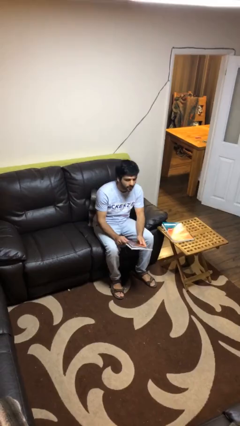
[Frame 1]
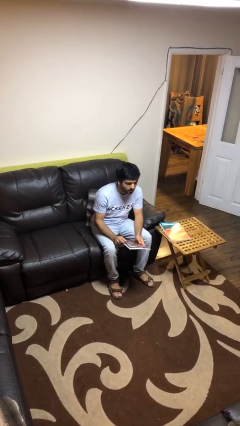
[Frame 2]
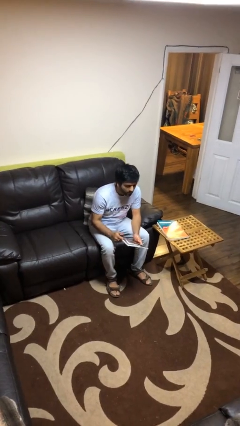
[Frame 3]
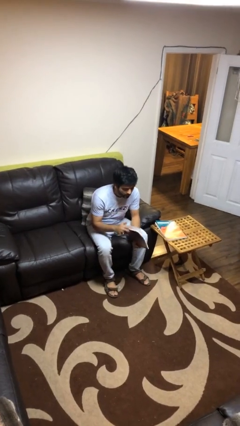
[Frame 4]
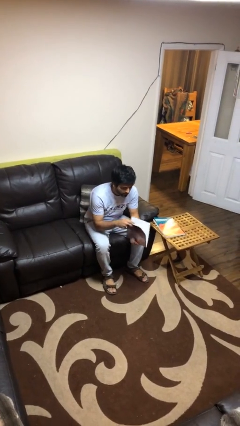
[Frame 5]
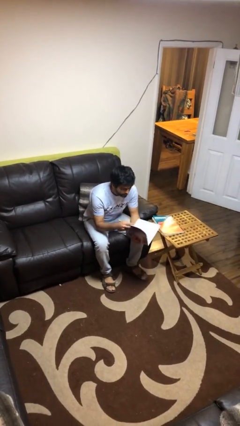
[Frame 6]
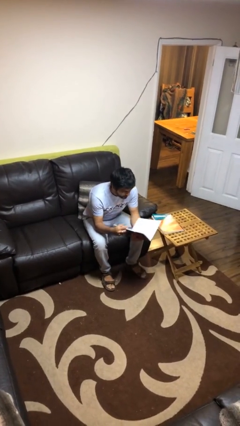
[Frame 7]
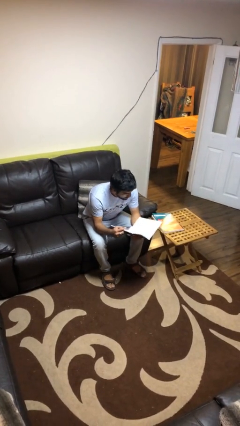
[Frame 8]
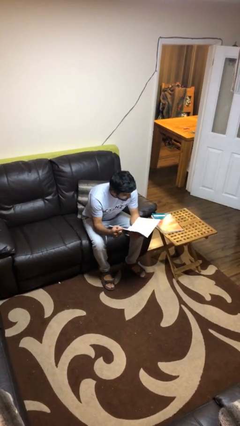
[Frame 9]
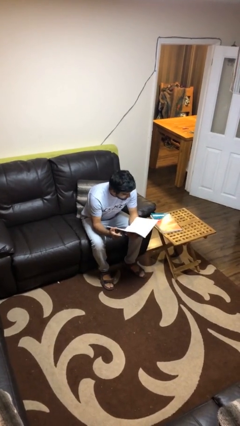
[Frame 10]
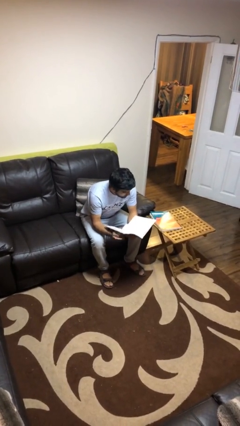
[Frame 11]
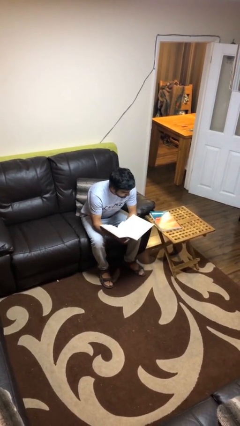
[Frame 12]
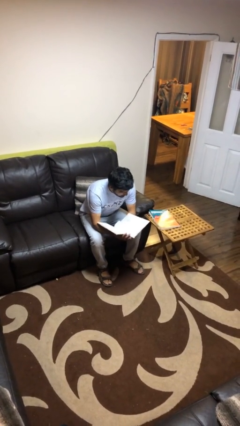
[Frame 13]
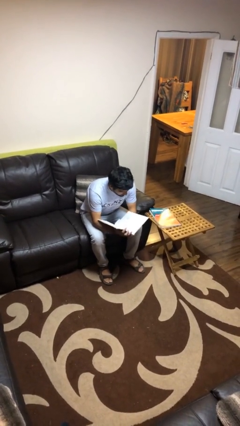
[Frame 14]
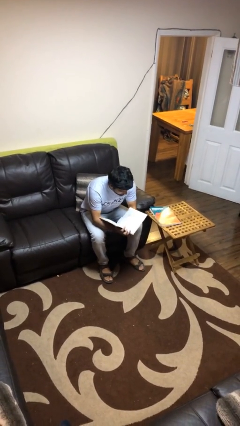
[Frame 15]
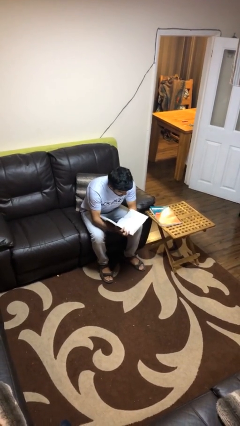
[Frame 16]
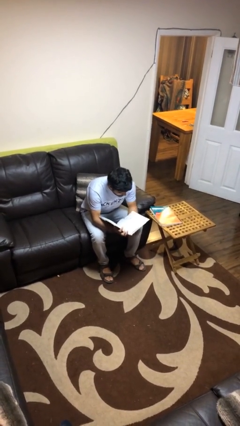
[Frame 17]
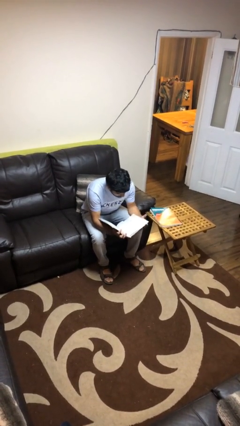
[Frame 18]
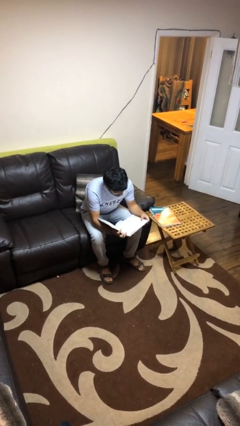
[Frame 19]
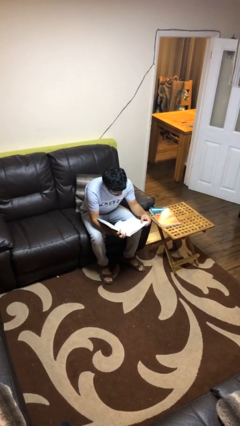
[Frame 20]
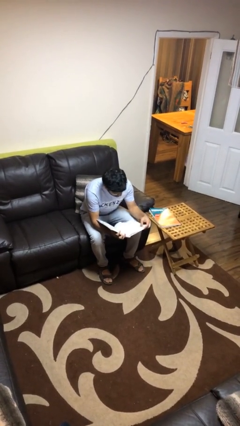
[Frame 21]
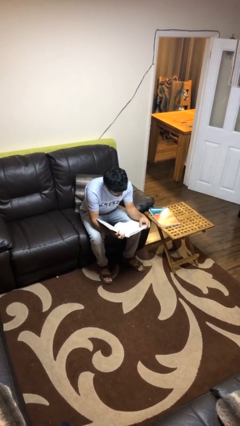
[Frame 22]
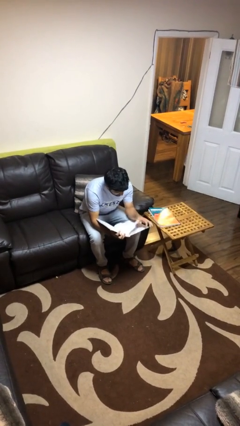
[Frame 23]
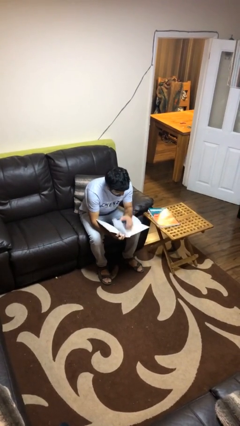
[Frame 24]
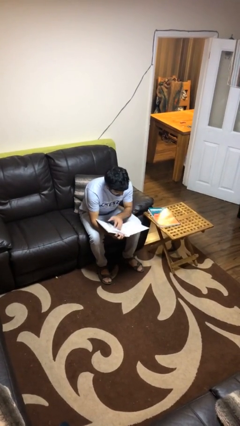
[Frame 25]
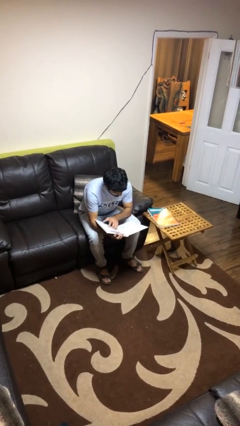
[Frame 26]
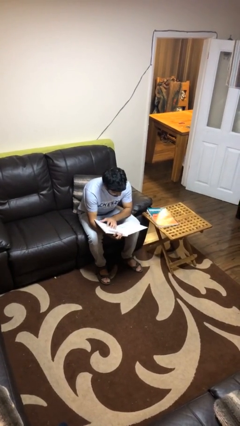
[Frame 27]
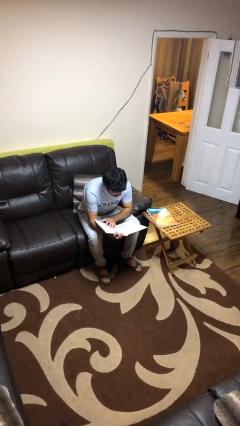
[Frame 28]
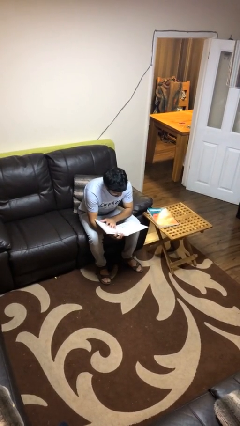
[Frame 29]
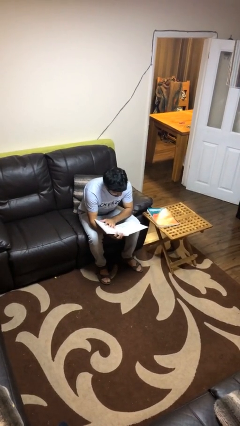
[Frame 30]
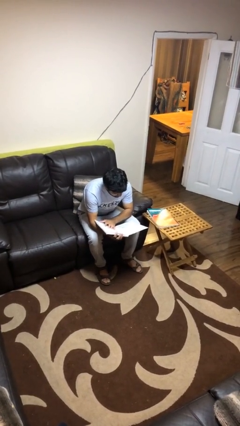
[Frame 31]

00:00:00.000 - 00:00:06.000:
person reads document

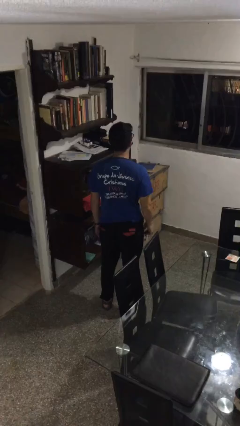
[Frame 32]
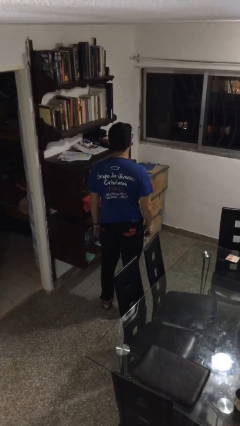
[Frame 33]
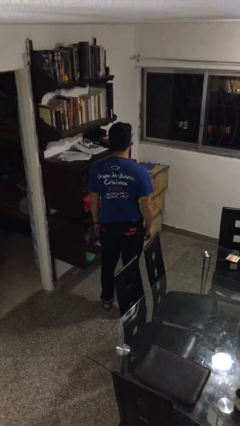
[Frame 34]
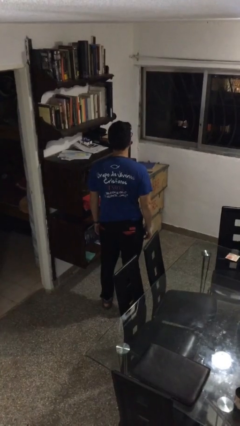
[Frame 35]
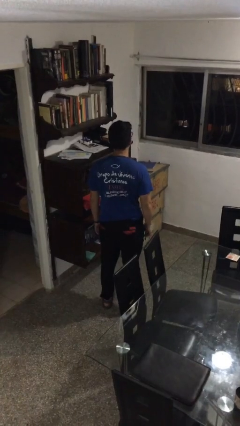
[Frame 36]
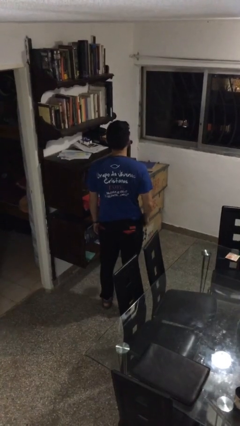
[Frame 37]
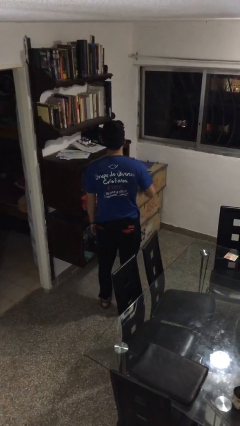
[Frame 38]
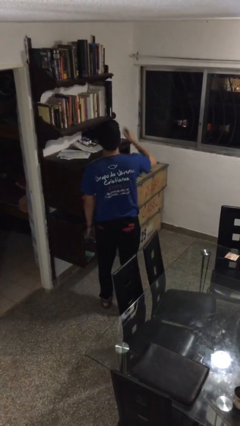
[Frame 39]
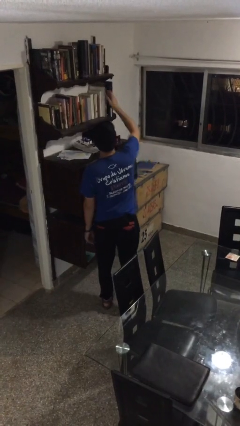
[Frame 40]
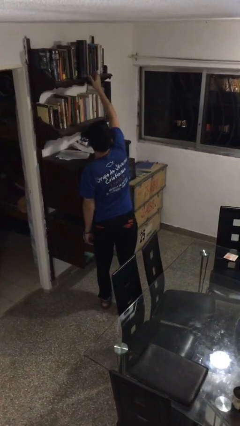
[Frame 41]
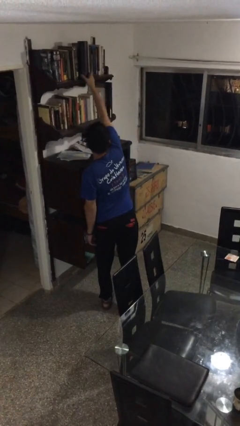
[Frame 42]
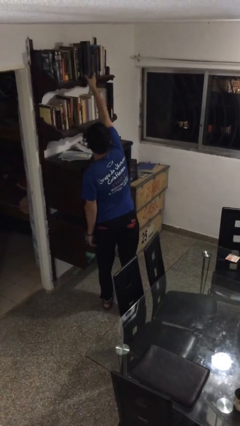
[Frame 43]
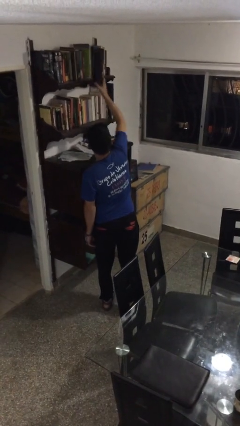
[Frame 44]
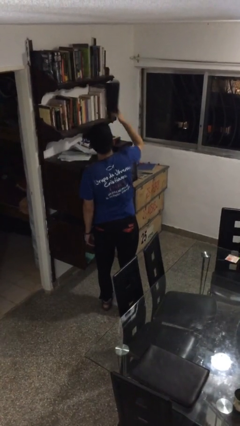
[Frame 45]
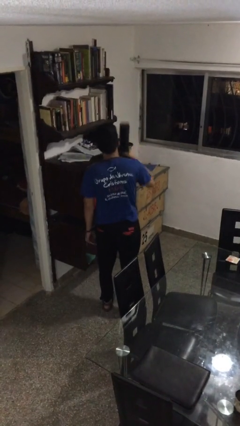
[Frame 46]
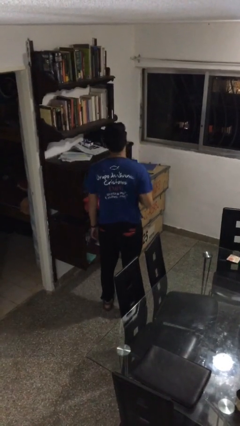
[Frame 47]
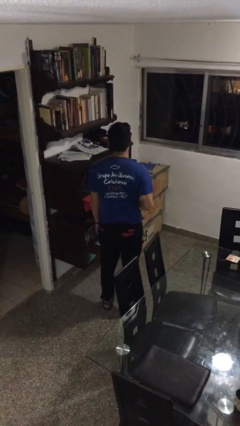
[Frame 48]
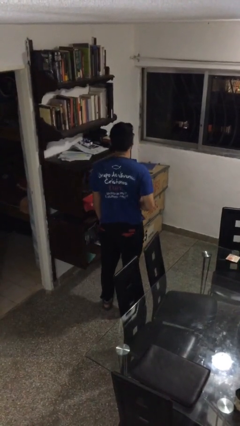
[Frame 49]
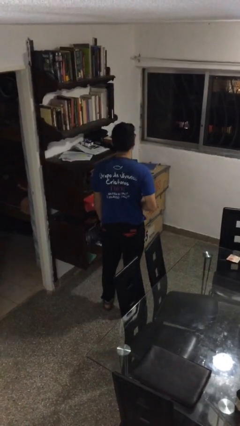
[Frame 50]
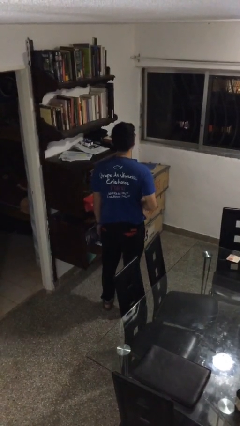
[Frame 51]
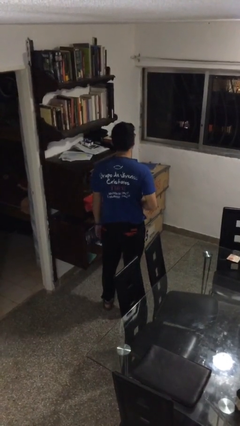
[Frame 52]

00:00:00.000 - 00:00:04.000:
person picks up object from shelf

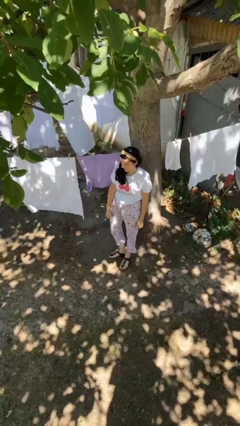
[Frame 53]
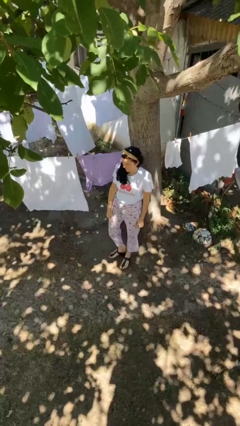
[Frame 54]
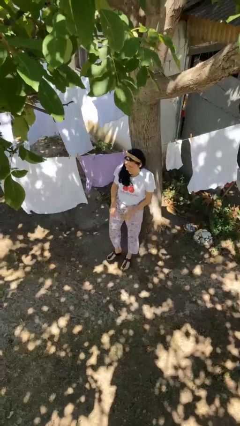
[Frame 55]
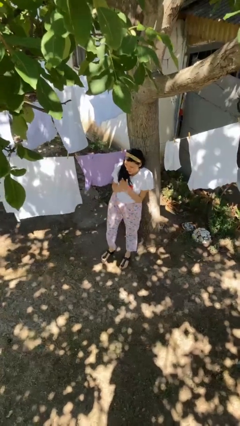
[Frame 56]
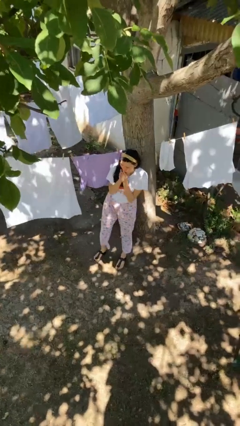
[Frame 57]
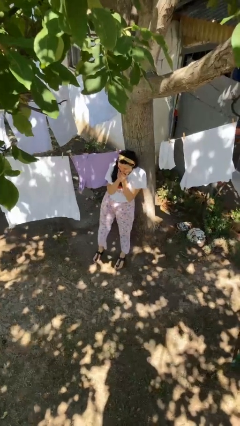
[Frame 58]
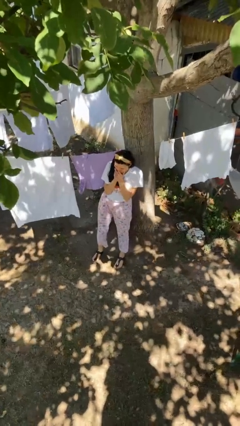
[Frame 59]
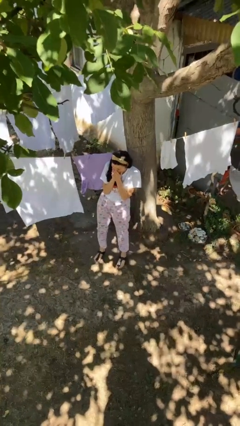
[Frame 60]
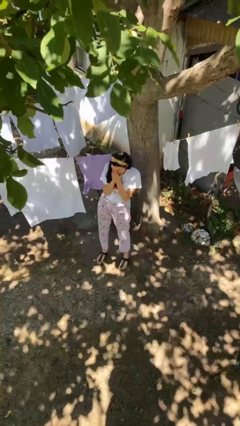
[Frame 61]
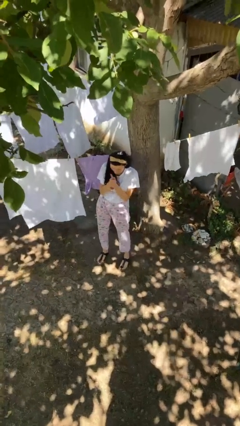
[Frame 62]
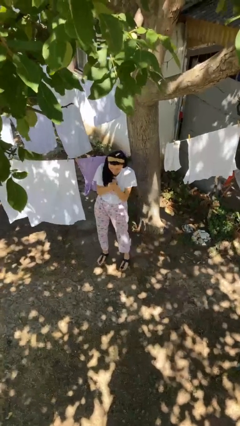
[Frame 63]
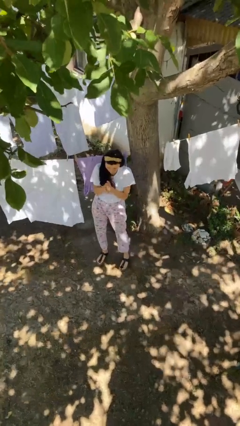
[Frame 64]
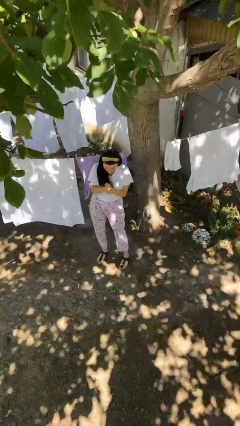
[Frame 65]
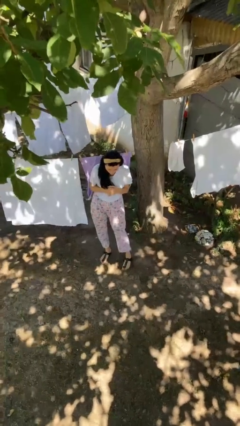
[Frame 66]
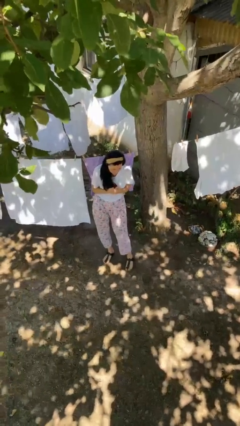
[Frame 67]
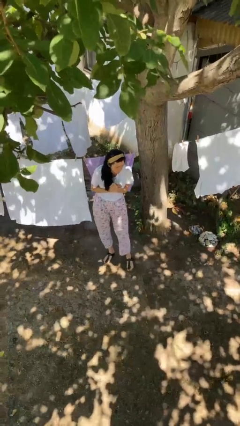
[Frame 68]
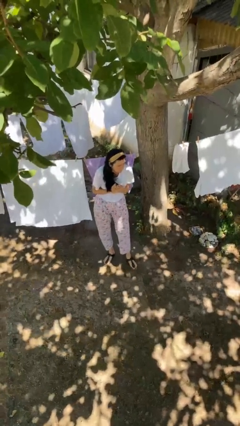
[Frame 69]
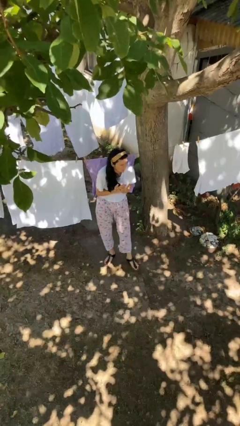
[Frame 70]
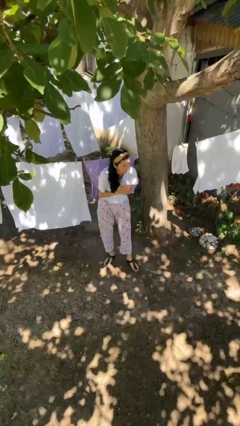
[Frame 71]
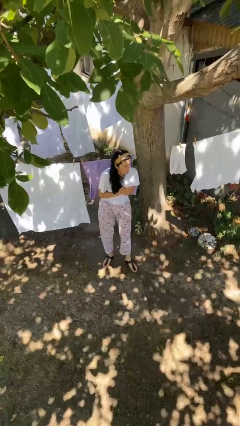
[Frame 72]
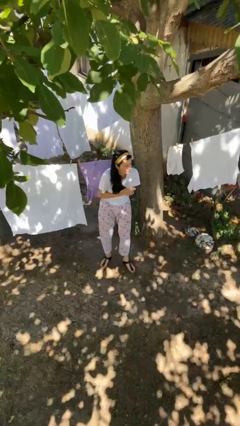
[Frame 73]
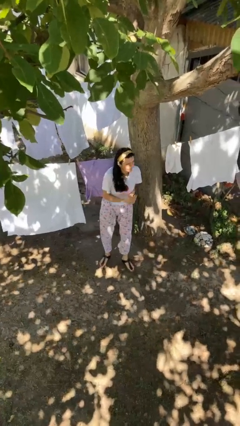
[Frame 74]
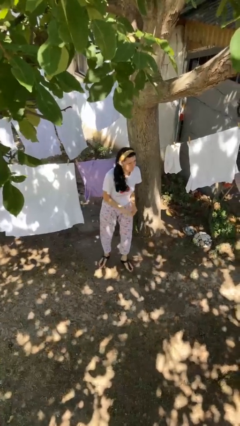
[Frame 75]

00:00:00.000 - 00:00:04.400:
person blows into hands

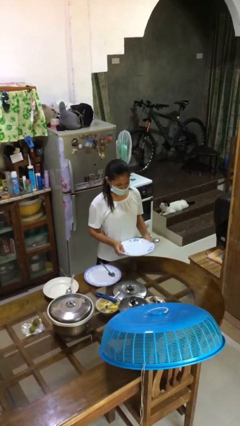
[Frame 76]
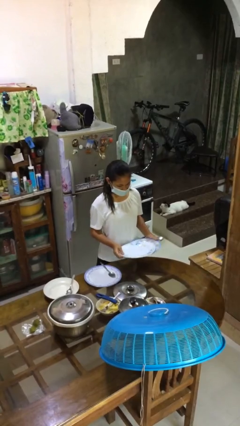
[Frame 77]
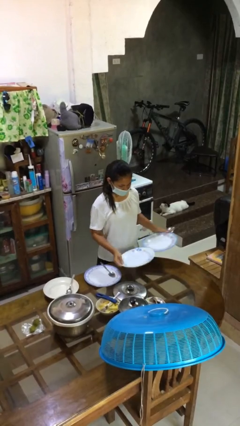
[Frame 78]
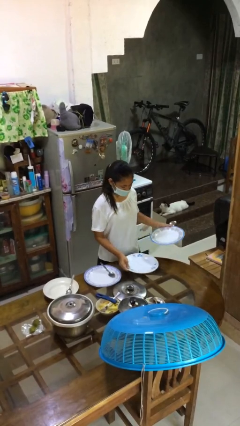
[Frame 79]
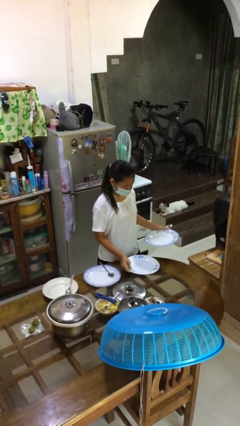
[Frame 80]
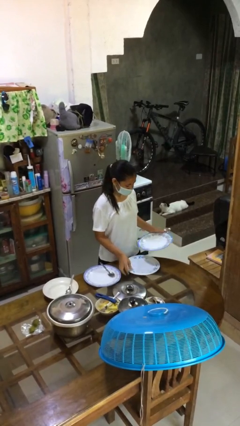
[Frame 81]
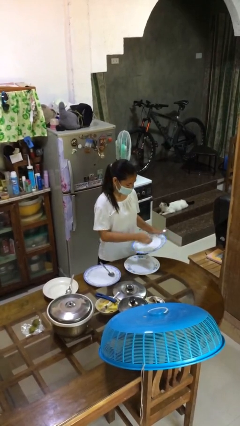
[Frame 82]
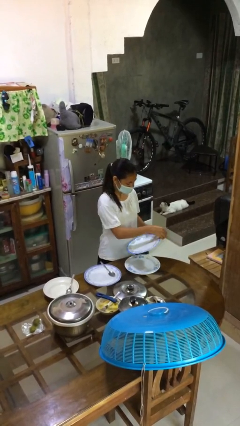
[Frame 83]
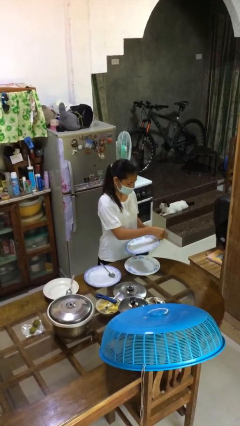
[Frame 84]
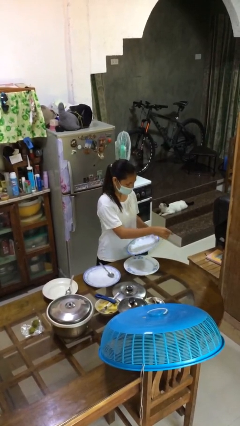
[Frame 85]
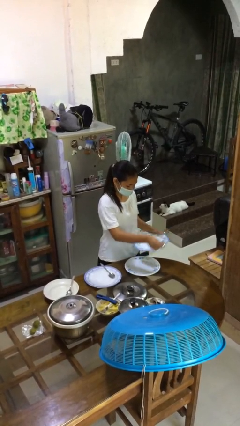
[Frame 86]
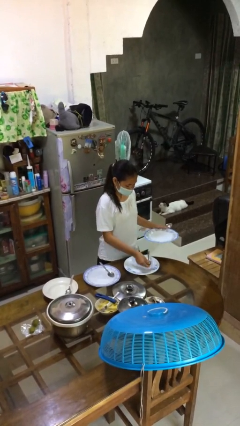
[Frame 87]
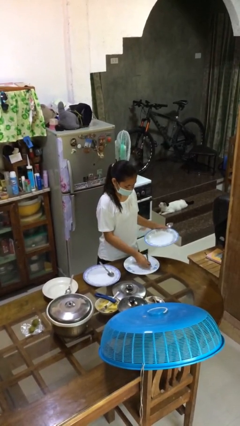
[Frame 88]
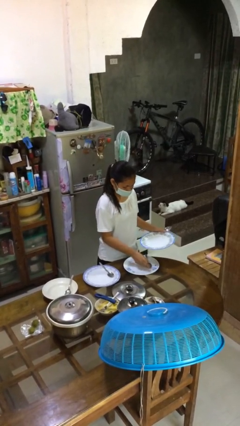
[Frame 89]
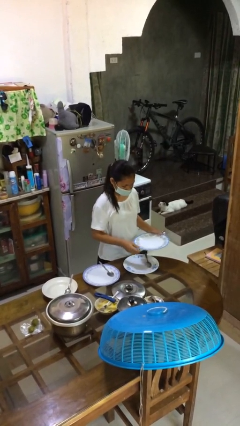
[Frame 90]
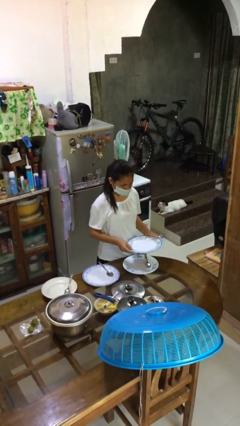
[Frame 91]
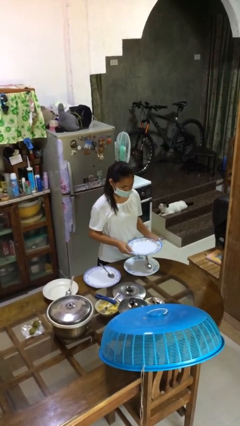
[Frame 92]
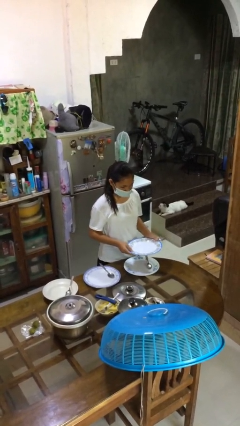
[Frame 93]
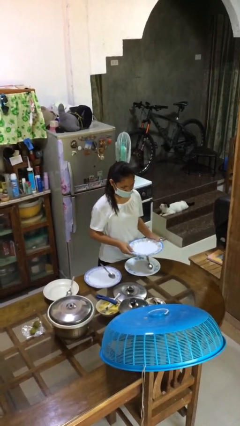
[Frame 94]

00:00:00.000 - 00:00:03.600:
person sets table
